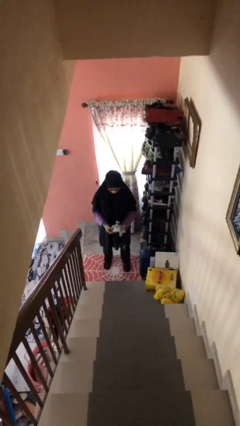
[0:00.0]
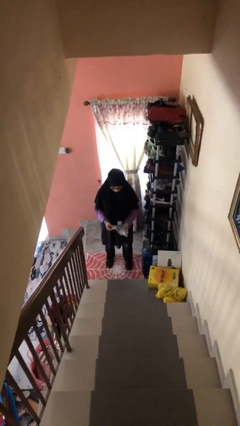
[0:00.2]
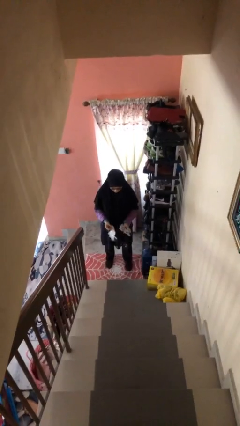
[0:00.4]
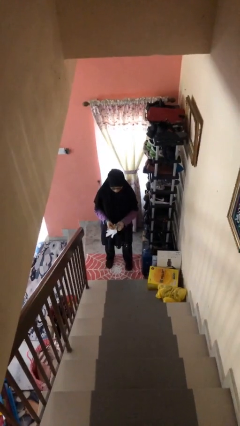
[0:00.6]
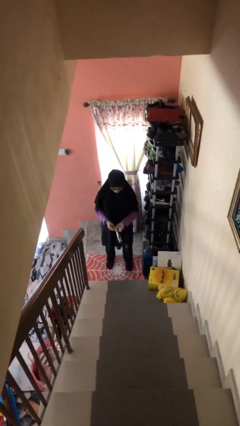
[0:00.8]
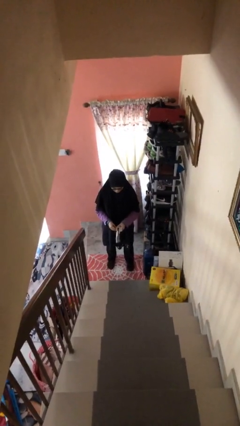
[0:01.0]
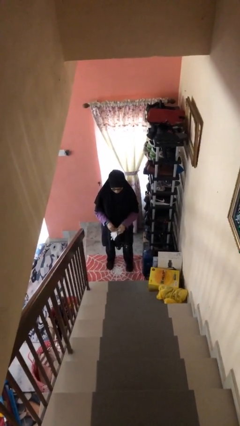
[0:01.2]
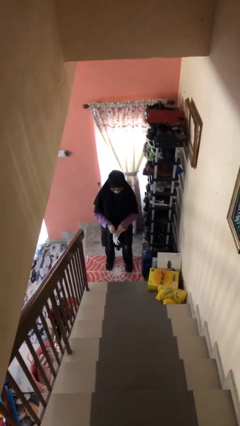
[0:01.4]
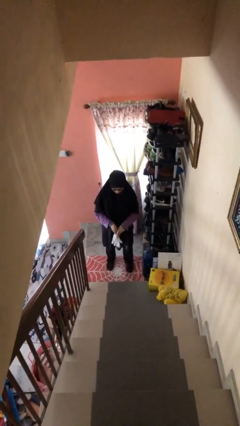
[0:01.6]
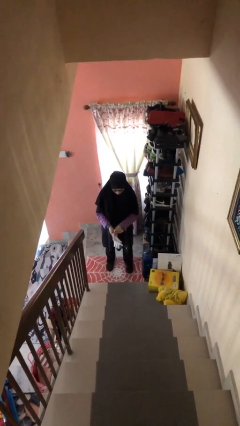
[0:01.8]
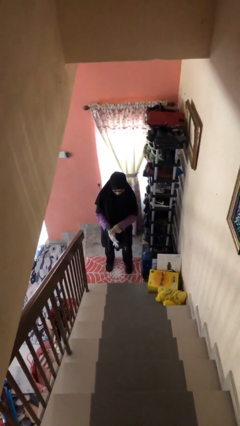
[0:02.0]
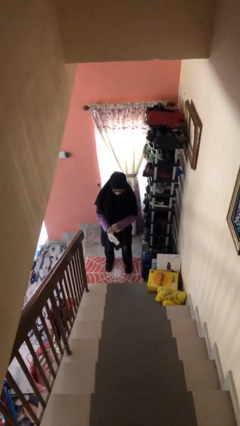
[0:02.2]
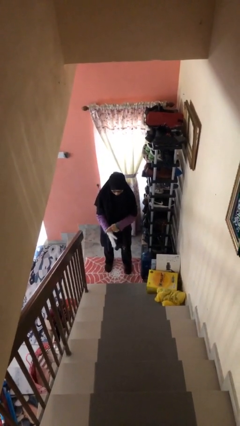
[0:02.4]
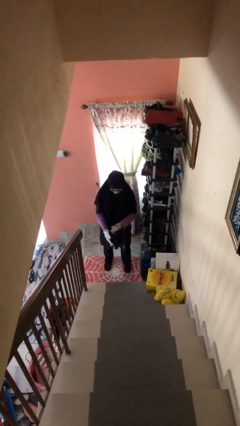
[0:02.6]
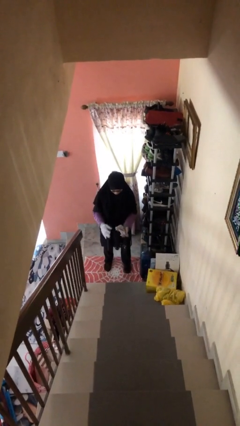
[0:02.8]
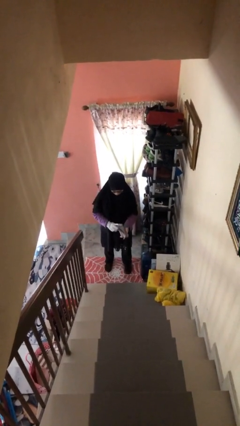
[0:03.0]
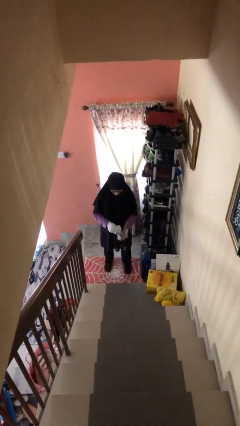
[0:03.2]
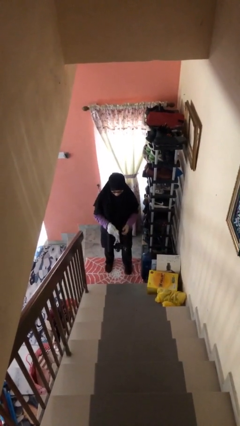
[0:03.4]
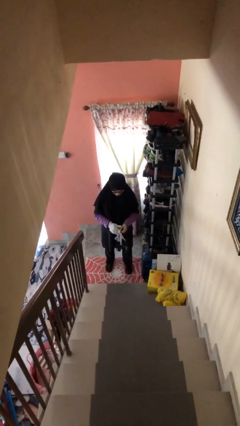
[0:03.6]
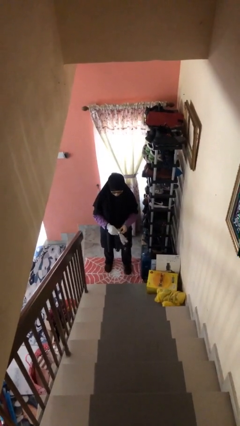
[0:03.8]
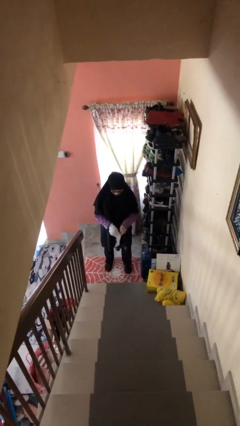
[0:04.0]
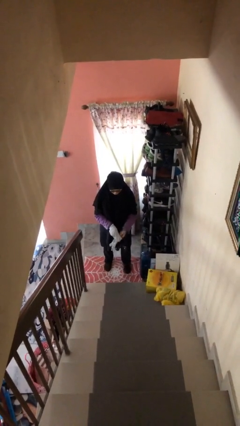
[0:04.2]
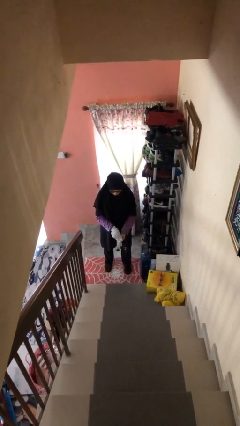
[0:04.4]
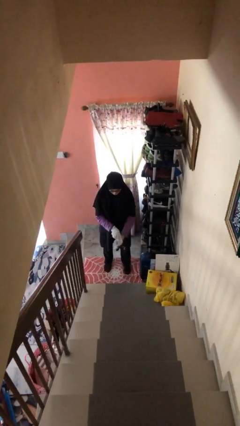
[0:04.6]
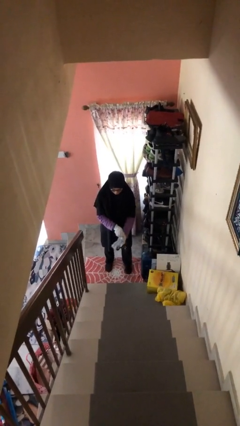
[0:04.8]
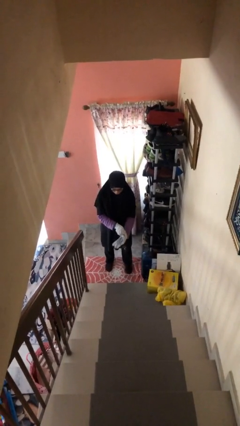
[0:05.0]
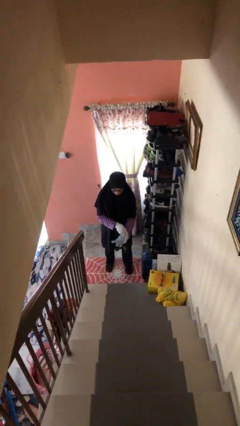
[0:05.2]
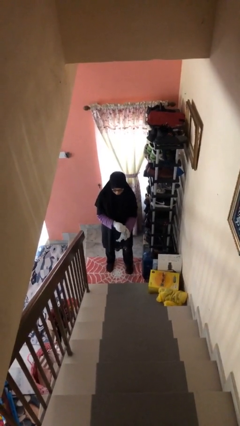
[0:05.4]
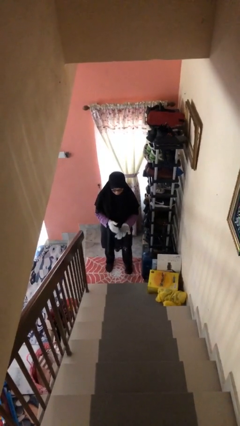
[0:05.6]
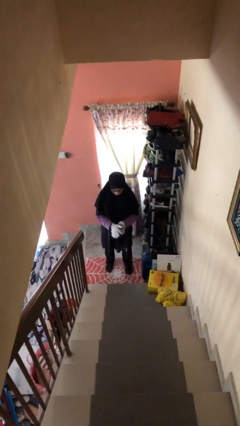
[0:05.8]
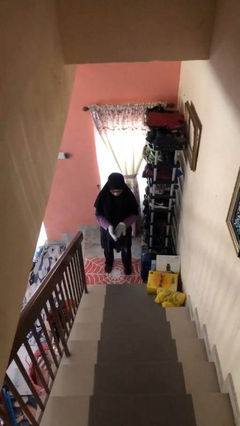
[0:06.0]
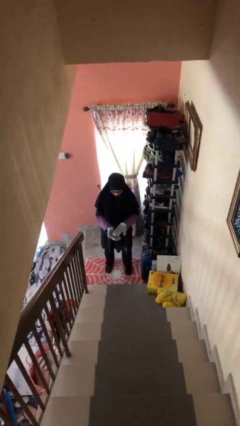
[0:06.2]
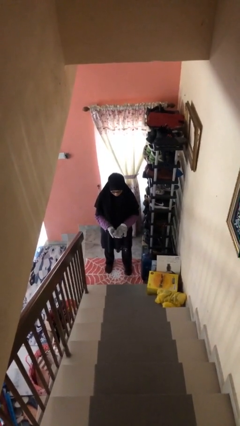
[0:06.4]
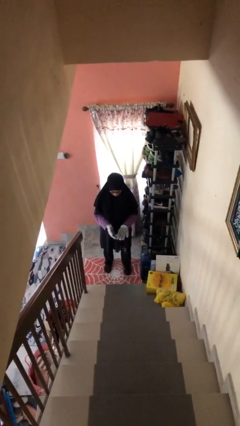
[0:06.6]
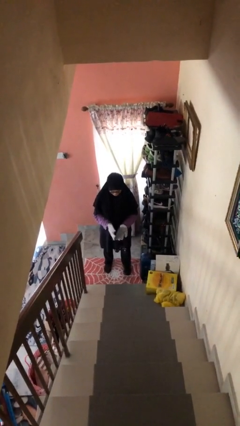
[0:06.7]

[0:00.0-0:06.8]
person puts on gloves

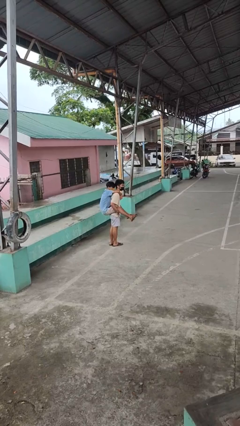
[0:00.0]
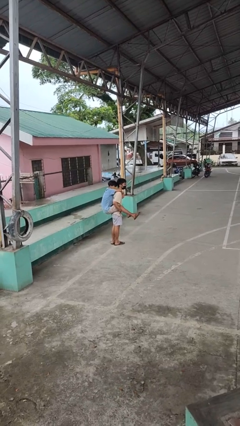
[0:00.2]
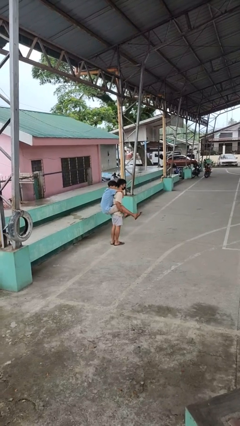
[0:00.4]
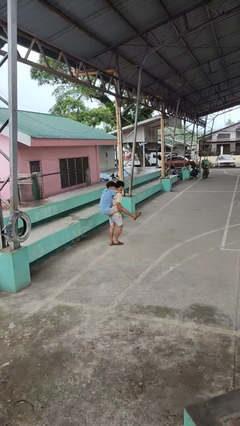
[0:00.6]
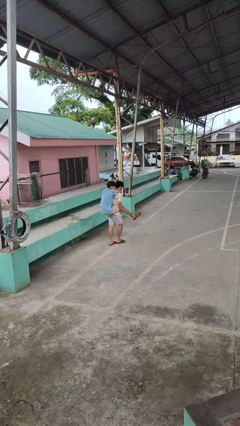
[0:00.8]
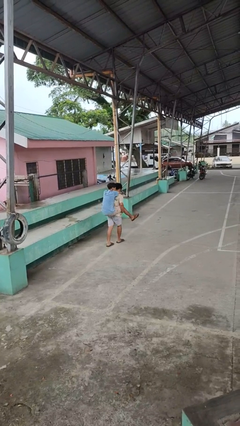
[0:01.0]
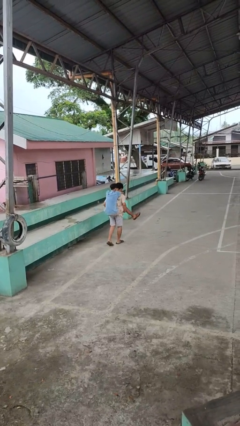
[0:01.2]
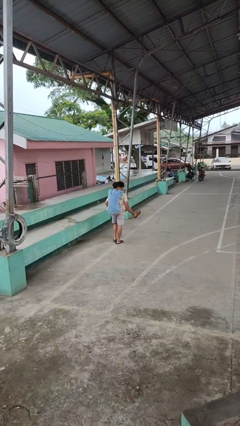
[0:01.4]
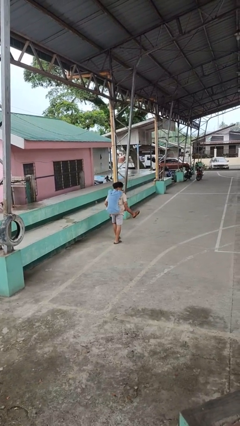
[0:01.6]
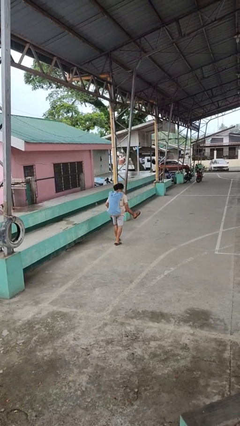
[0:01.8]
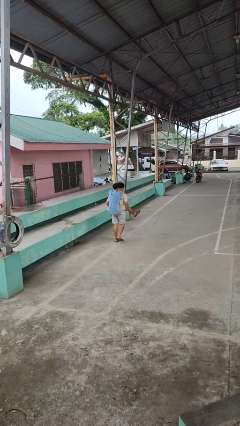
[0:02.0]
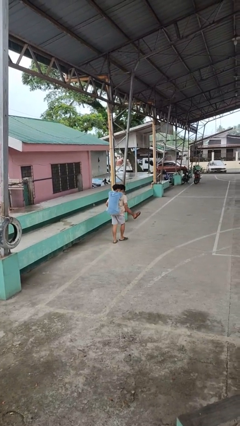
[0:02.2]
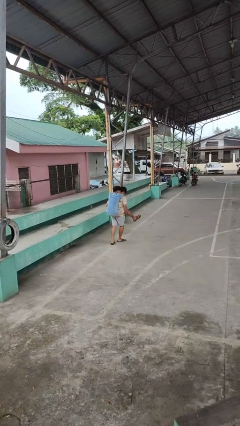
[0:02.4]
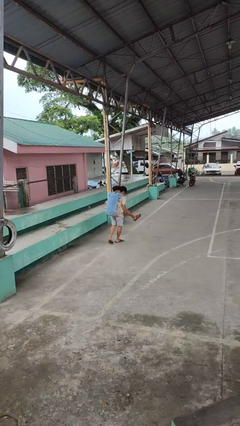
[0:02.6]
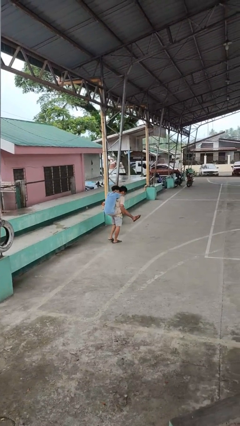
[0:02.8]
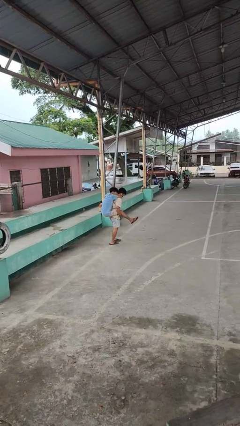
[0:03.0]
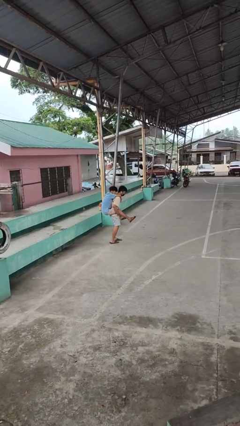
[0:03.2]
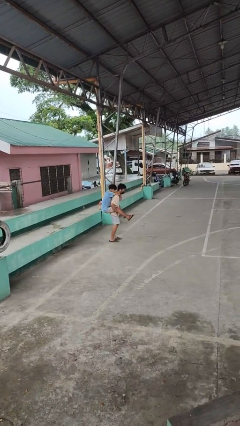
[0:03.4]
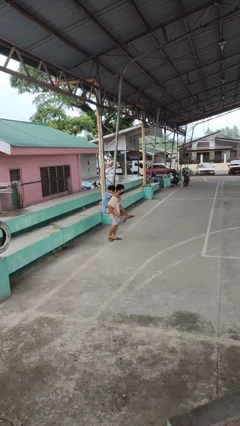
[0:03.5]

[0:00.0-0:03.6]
person carries person on back

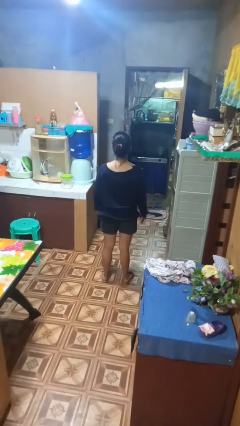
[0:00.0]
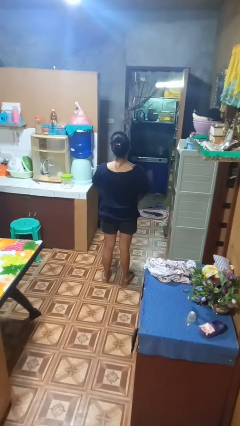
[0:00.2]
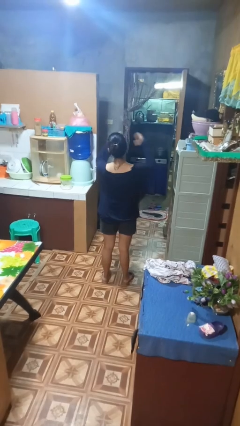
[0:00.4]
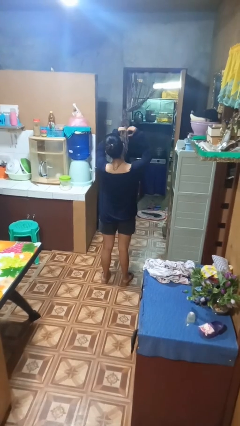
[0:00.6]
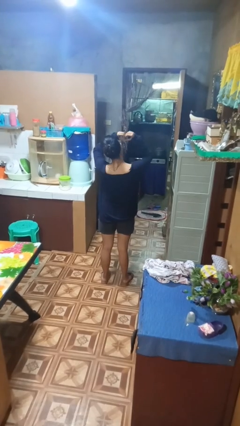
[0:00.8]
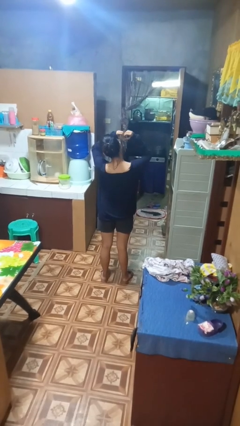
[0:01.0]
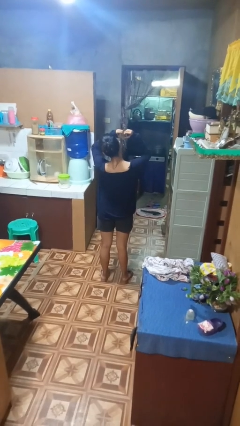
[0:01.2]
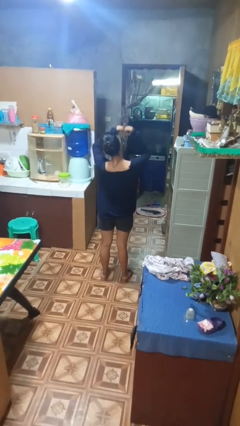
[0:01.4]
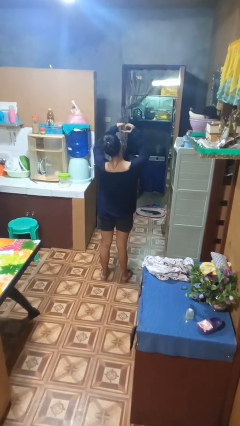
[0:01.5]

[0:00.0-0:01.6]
person gestures heart

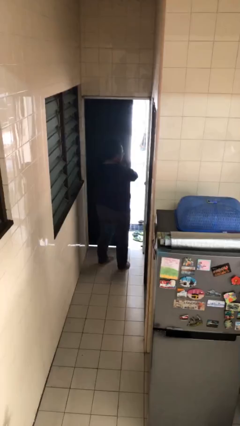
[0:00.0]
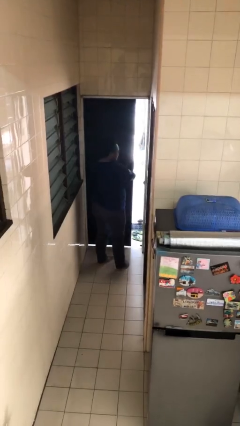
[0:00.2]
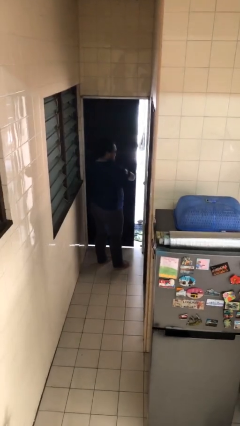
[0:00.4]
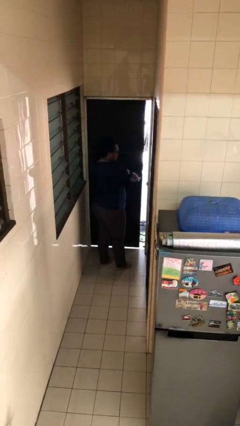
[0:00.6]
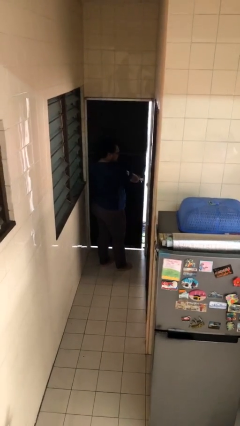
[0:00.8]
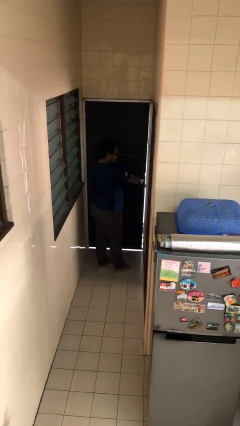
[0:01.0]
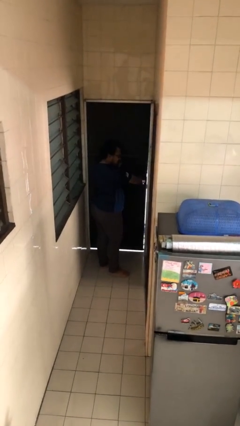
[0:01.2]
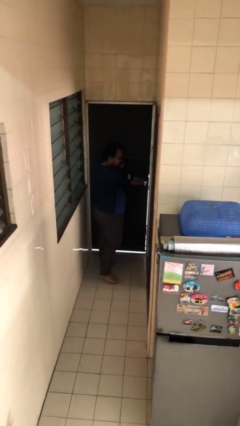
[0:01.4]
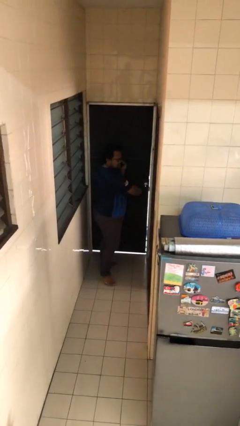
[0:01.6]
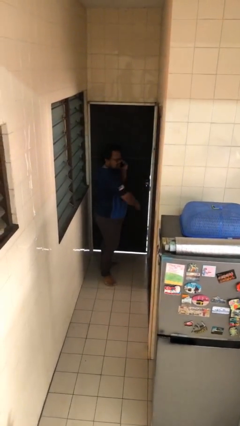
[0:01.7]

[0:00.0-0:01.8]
person closes facility door

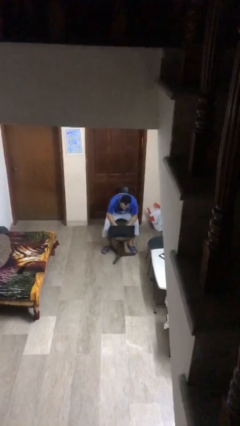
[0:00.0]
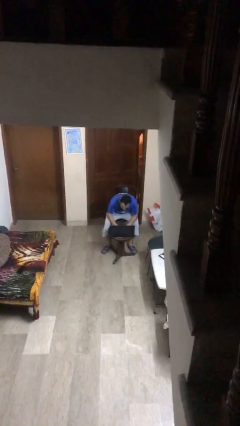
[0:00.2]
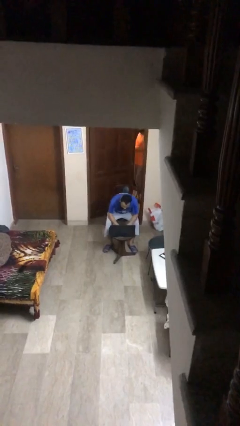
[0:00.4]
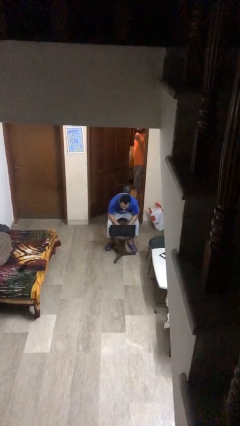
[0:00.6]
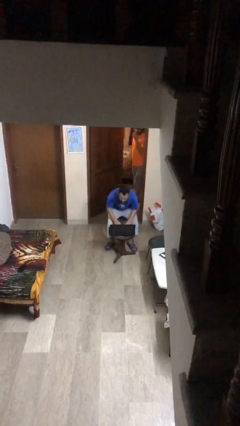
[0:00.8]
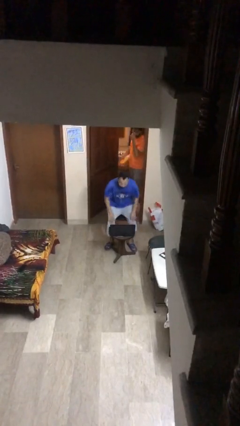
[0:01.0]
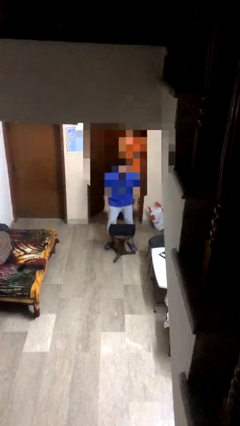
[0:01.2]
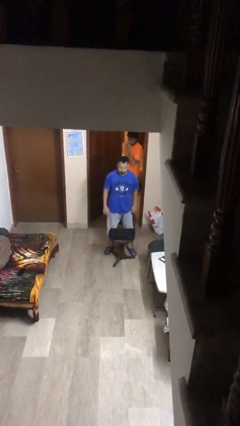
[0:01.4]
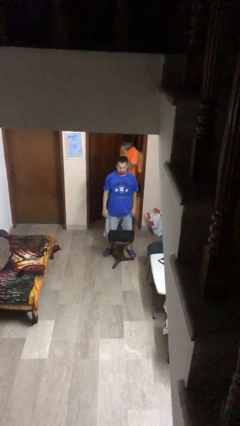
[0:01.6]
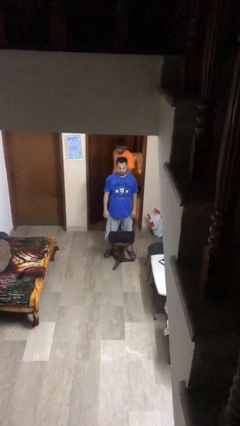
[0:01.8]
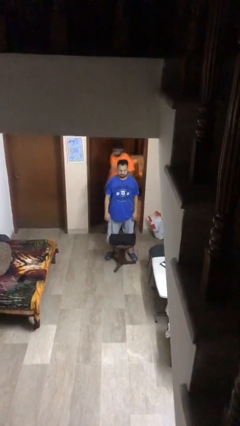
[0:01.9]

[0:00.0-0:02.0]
person stands up

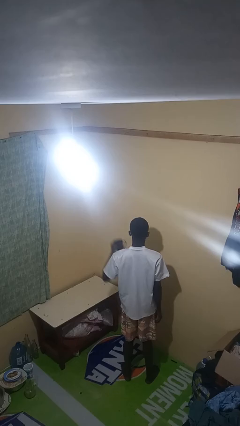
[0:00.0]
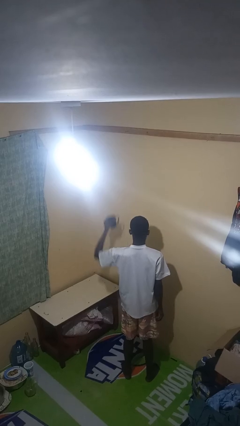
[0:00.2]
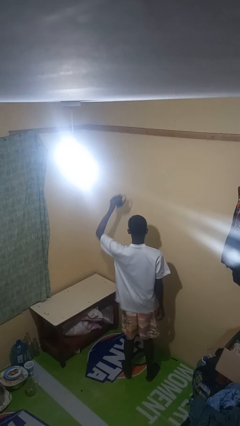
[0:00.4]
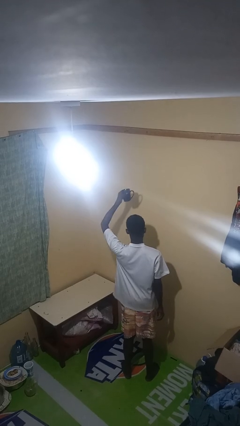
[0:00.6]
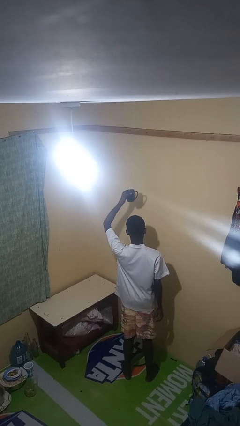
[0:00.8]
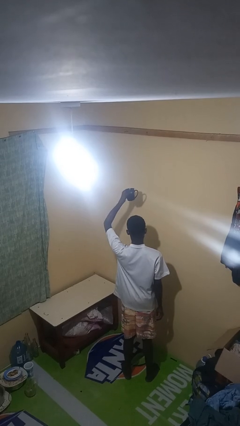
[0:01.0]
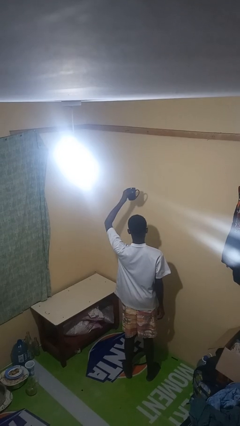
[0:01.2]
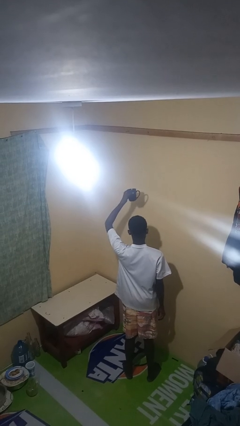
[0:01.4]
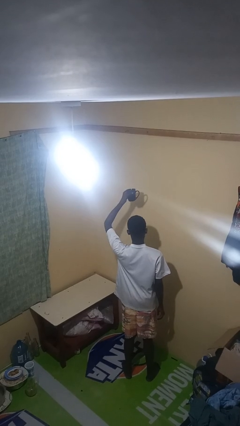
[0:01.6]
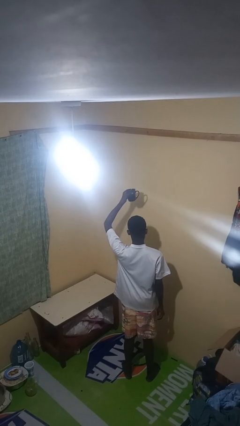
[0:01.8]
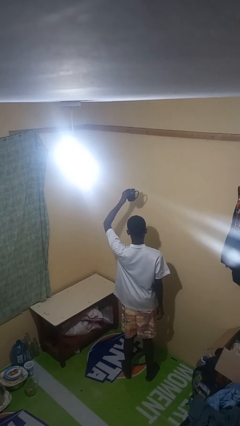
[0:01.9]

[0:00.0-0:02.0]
person holds object above head
